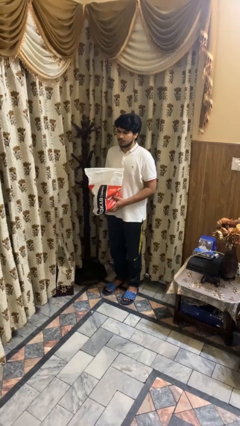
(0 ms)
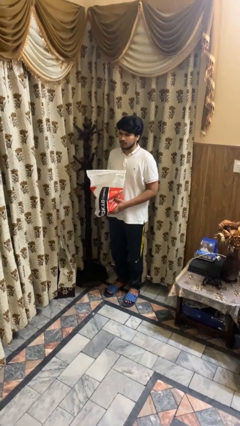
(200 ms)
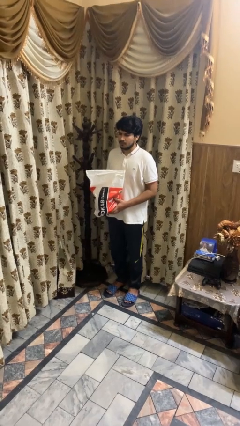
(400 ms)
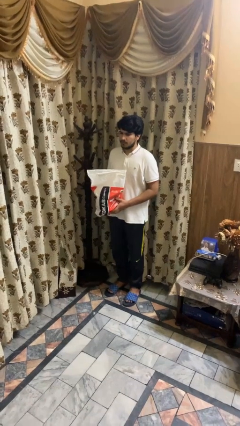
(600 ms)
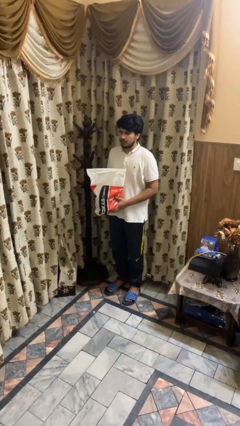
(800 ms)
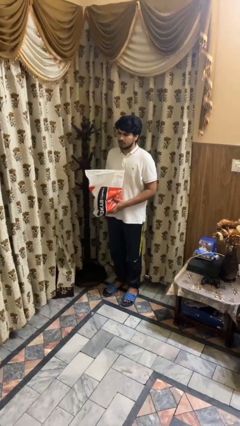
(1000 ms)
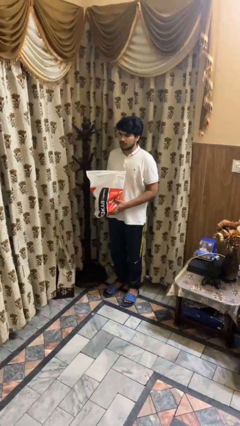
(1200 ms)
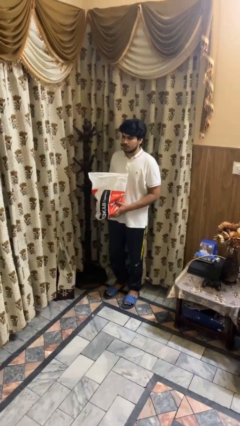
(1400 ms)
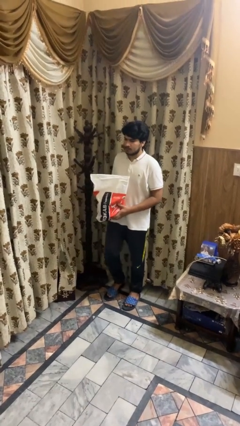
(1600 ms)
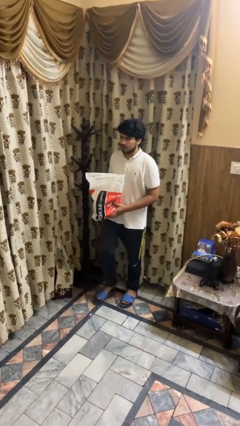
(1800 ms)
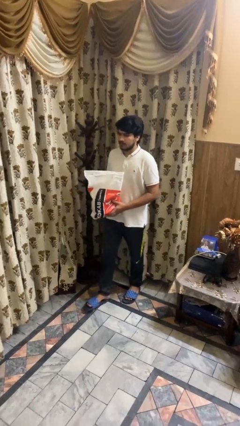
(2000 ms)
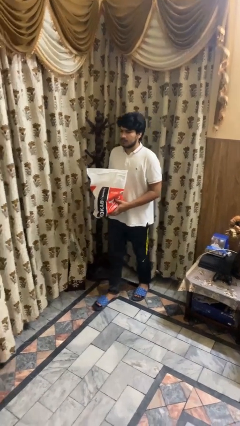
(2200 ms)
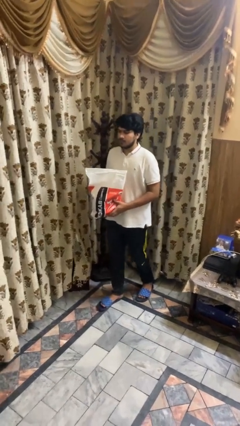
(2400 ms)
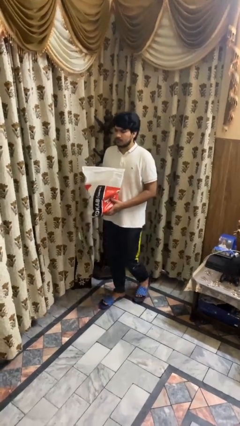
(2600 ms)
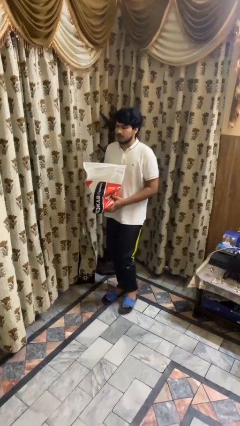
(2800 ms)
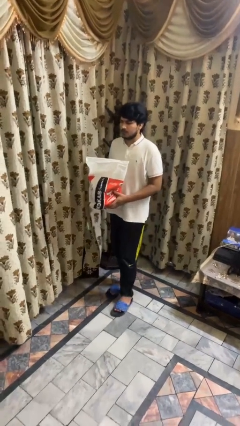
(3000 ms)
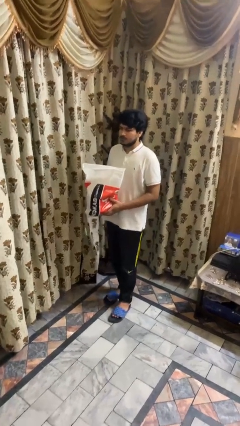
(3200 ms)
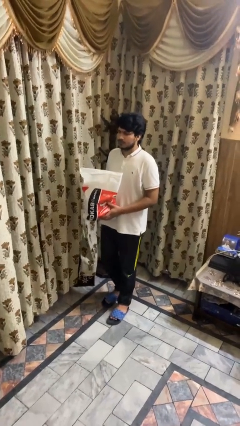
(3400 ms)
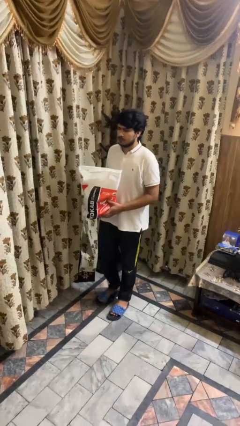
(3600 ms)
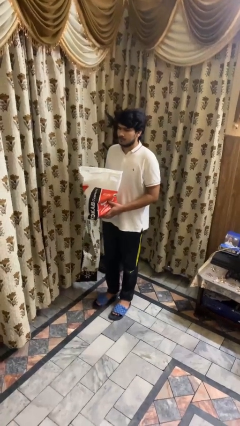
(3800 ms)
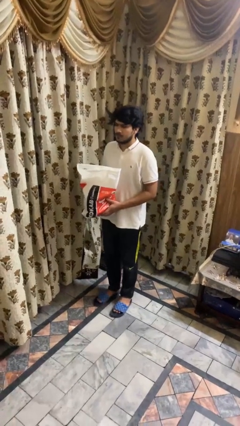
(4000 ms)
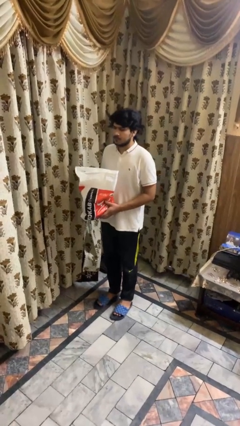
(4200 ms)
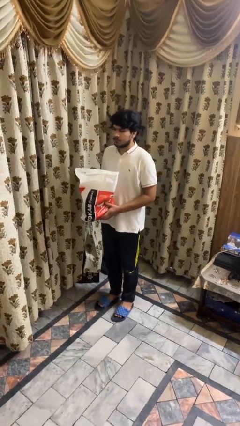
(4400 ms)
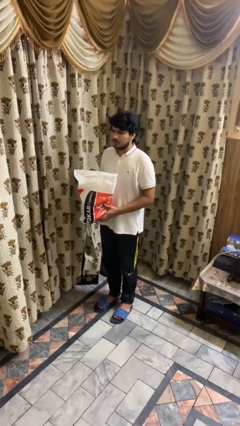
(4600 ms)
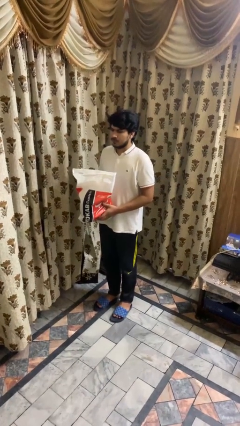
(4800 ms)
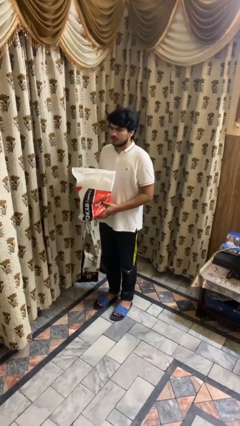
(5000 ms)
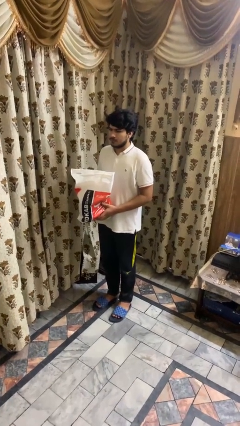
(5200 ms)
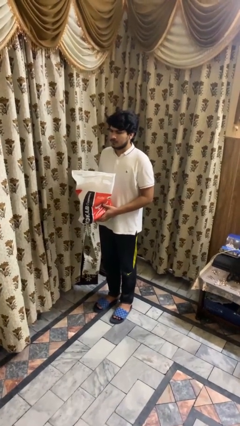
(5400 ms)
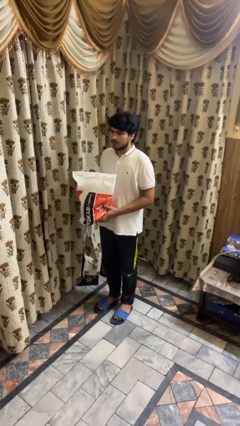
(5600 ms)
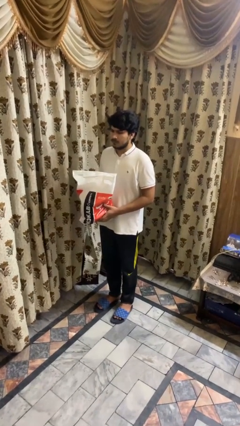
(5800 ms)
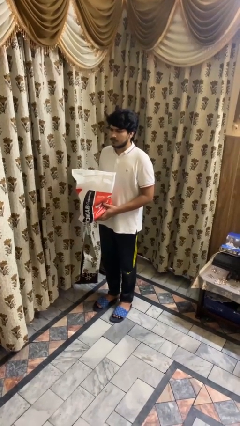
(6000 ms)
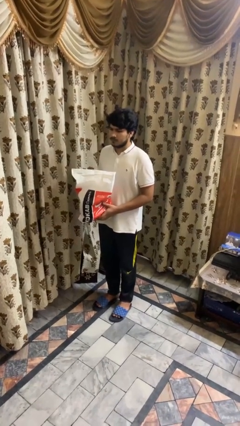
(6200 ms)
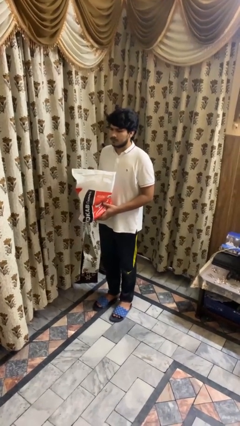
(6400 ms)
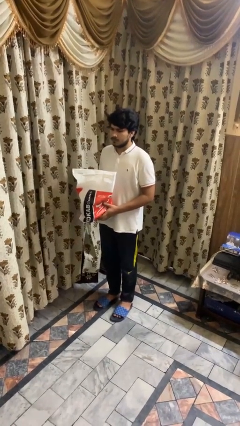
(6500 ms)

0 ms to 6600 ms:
person carries groceries

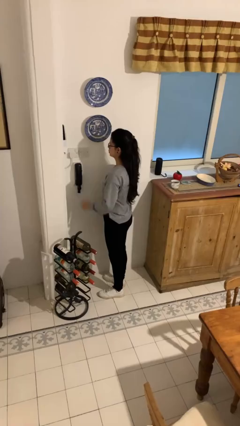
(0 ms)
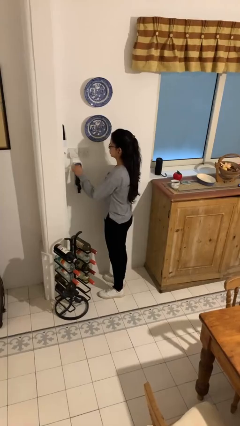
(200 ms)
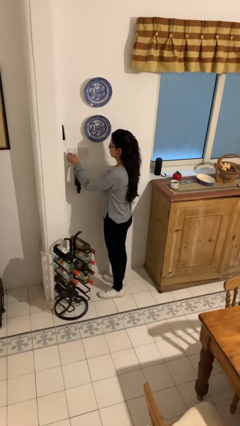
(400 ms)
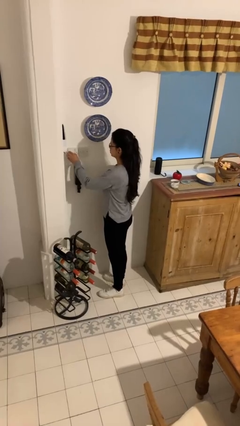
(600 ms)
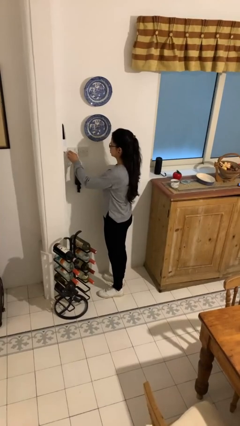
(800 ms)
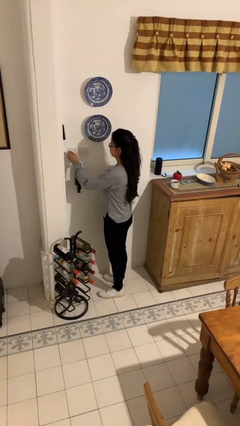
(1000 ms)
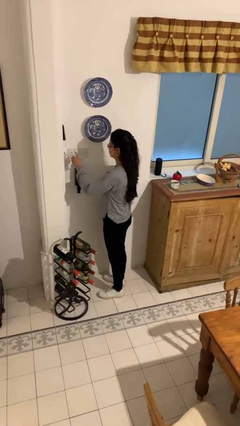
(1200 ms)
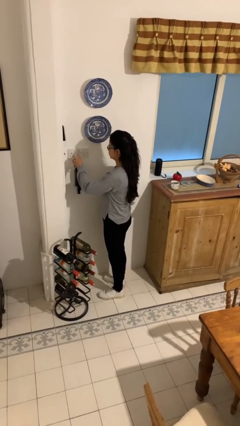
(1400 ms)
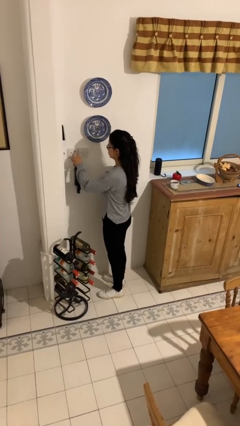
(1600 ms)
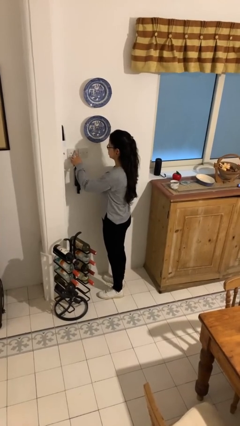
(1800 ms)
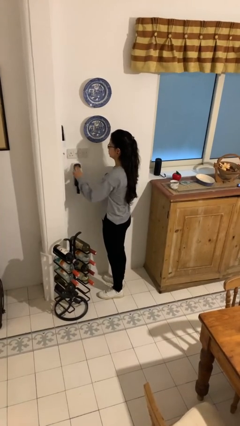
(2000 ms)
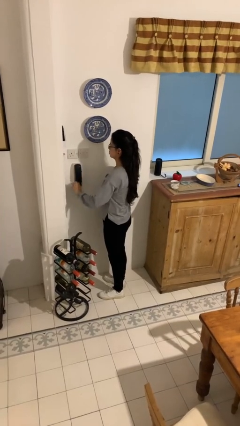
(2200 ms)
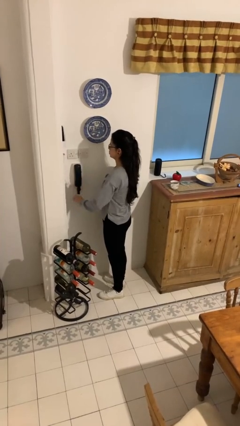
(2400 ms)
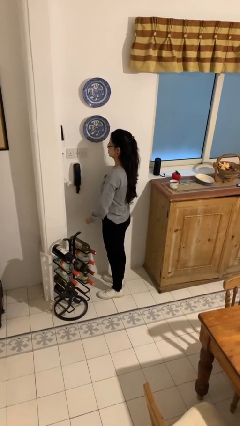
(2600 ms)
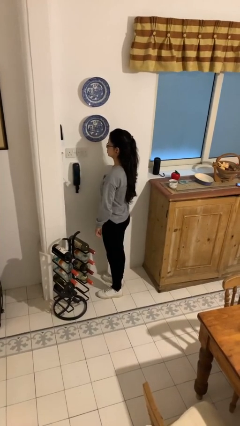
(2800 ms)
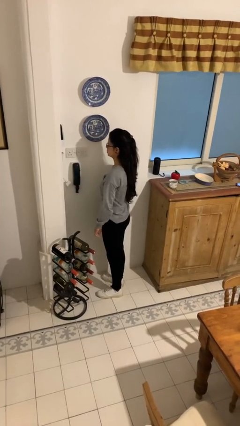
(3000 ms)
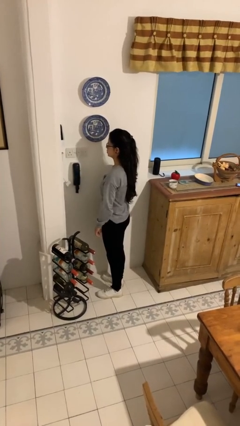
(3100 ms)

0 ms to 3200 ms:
person unplugs from electrical socket

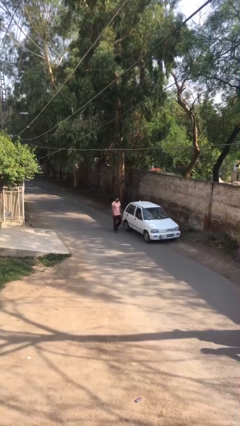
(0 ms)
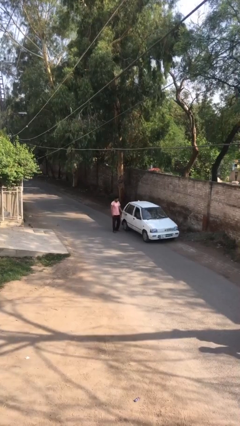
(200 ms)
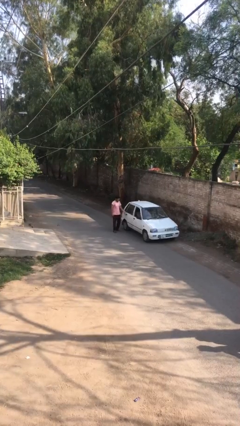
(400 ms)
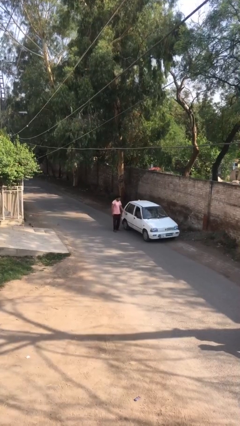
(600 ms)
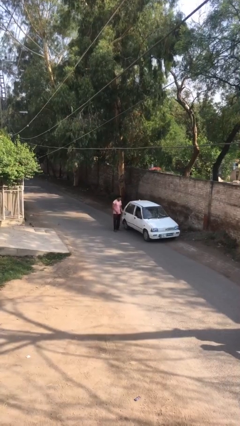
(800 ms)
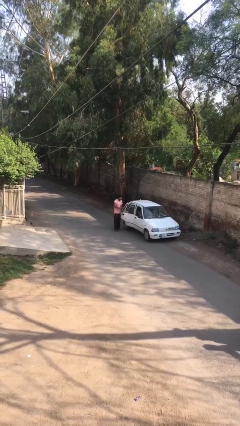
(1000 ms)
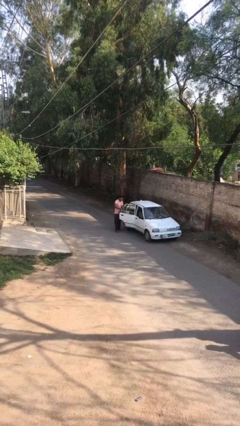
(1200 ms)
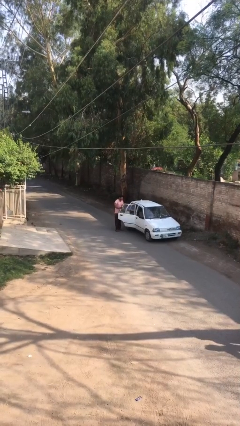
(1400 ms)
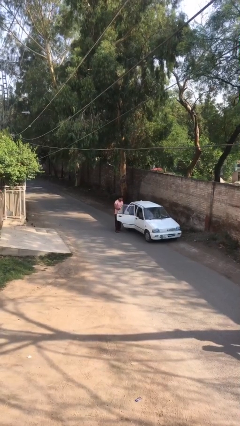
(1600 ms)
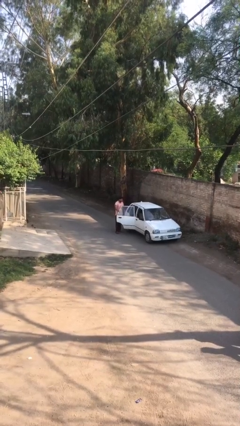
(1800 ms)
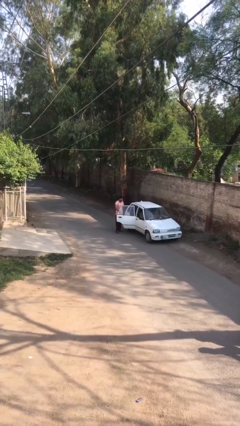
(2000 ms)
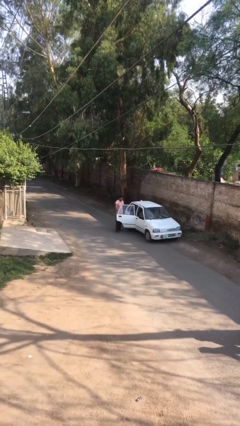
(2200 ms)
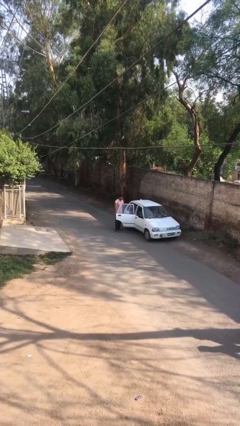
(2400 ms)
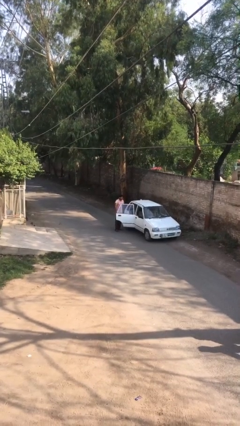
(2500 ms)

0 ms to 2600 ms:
person opens car door

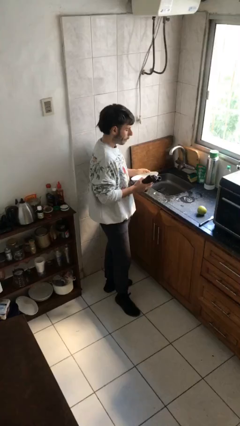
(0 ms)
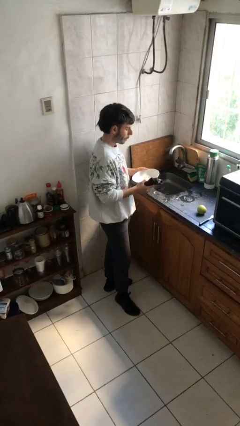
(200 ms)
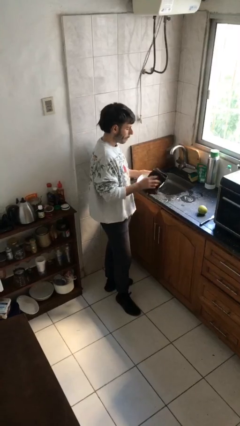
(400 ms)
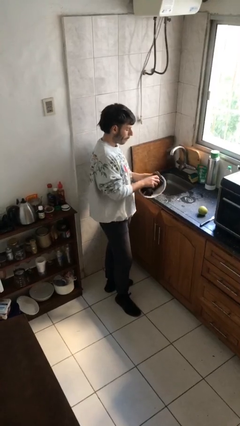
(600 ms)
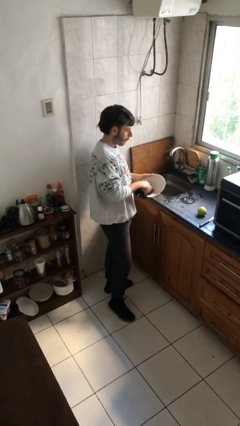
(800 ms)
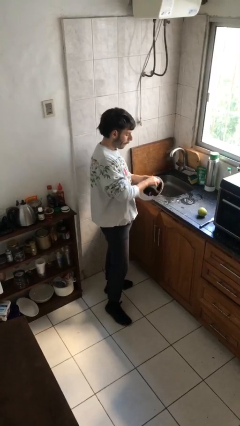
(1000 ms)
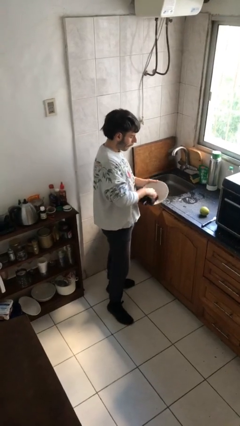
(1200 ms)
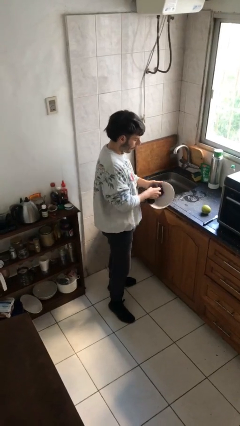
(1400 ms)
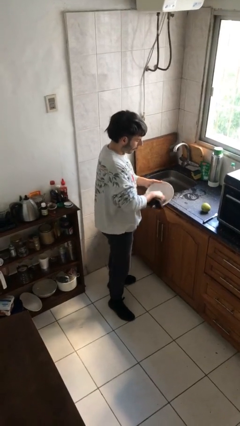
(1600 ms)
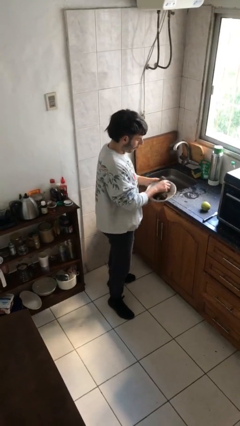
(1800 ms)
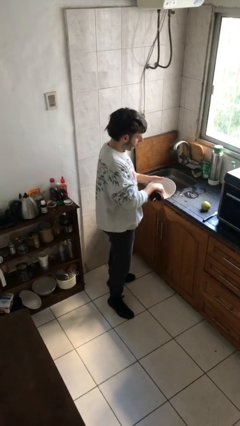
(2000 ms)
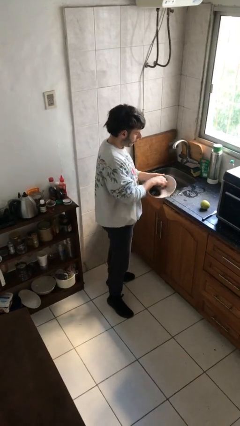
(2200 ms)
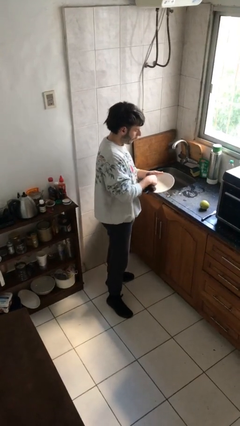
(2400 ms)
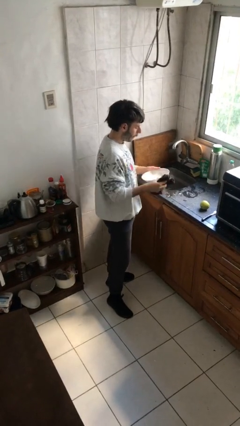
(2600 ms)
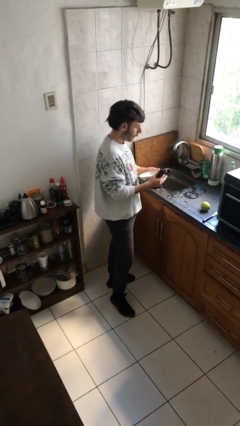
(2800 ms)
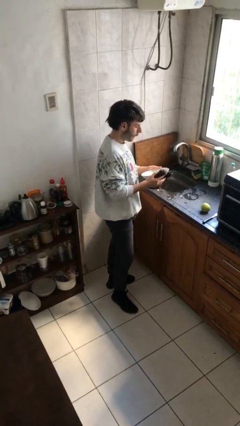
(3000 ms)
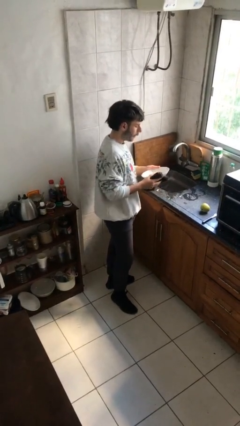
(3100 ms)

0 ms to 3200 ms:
person dries dish

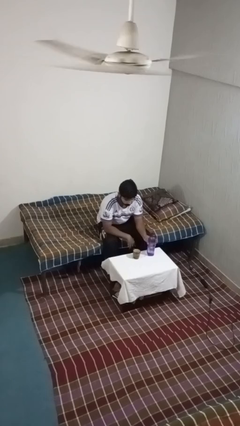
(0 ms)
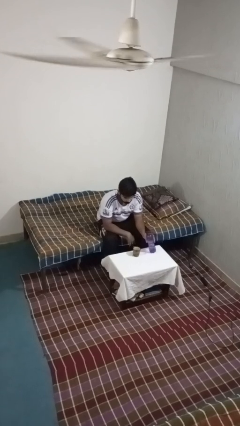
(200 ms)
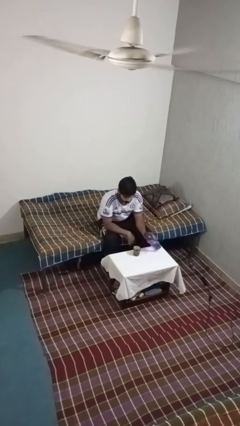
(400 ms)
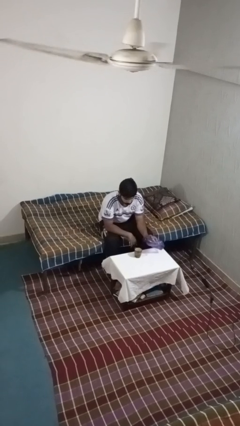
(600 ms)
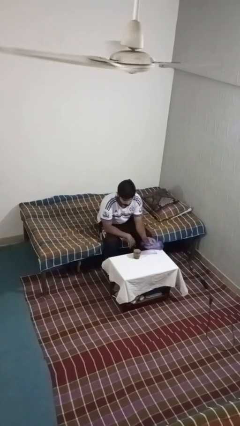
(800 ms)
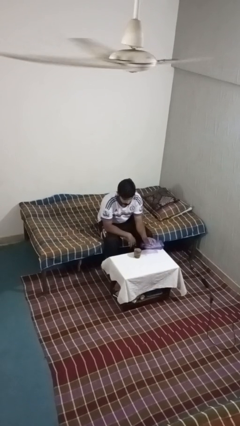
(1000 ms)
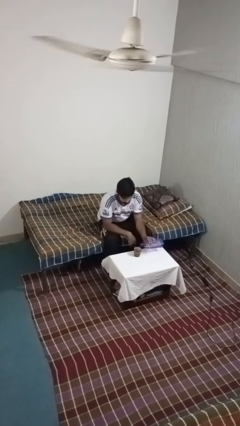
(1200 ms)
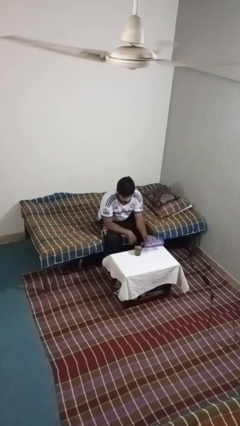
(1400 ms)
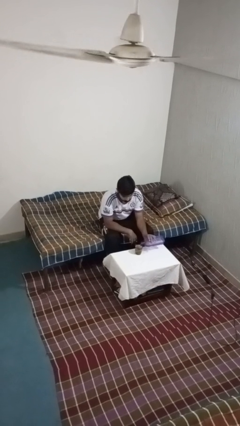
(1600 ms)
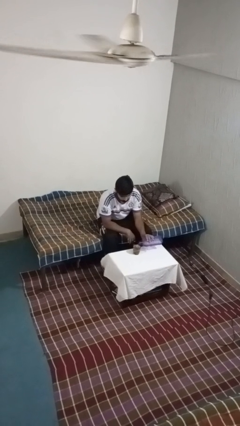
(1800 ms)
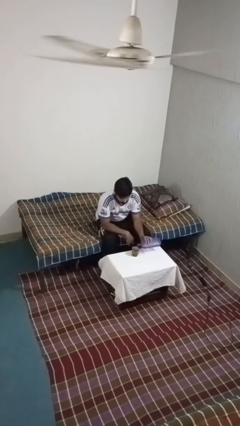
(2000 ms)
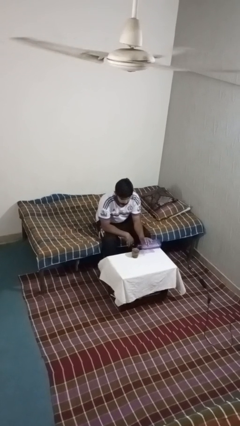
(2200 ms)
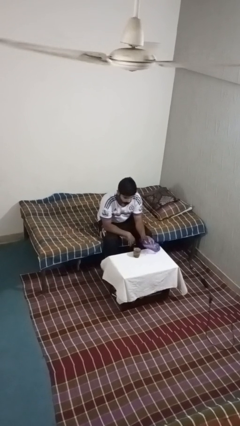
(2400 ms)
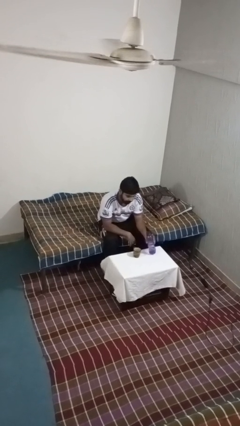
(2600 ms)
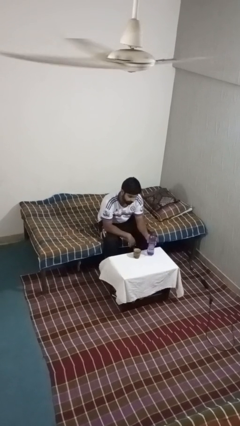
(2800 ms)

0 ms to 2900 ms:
person pours liquid into cup
